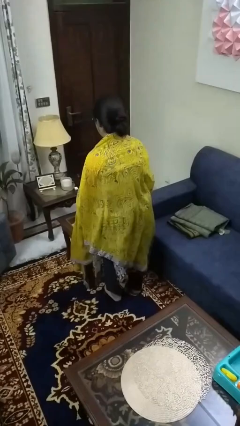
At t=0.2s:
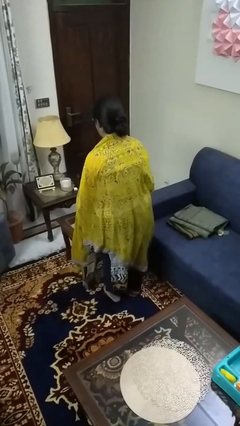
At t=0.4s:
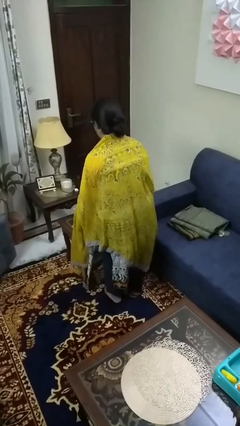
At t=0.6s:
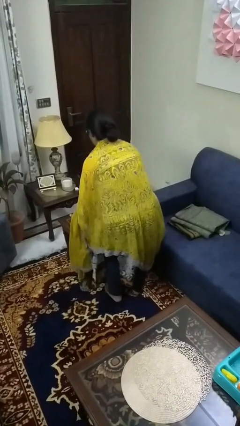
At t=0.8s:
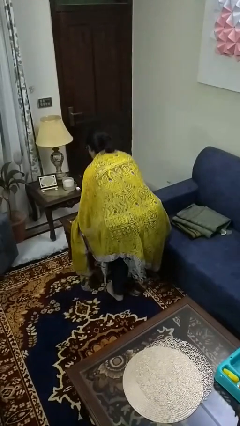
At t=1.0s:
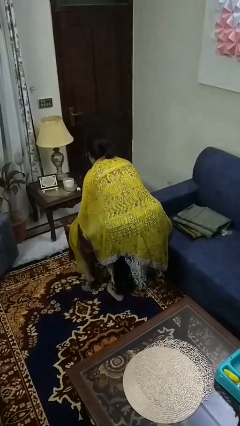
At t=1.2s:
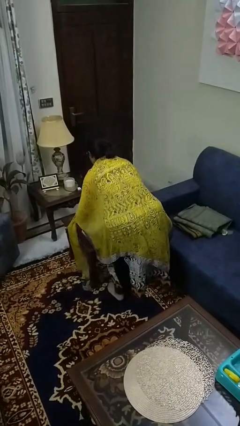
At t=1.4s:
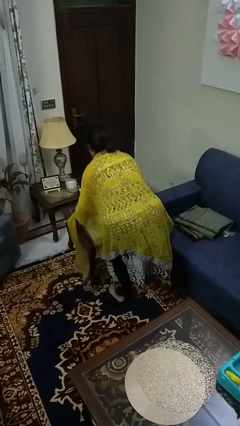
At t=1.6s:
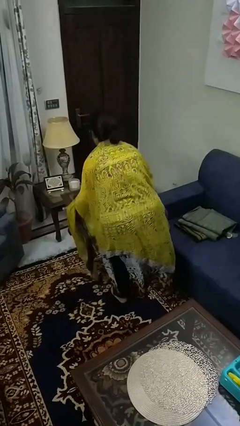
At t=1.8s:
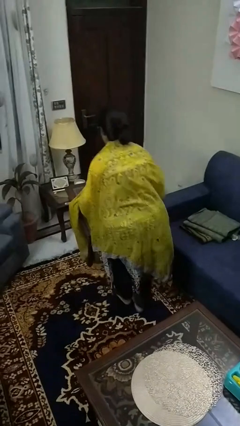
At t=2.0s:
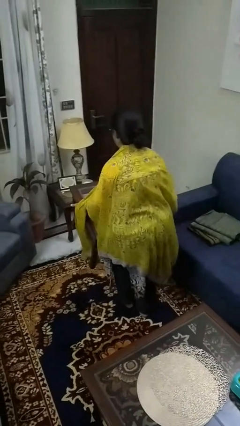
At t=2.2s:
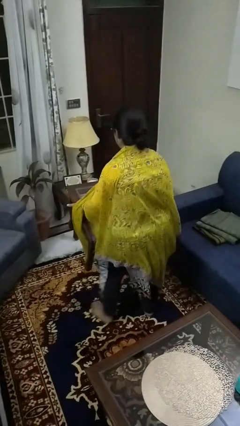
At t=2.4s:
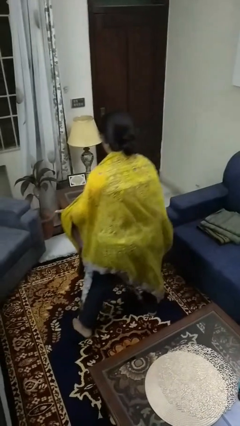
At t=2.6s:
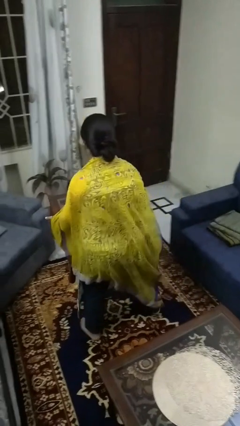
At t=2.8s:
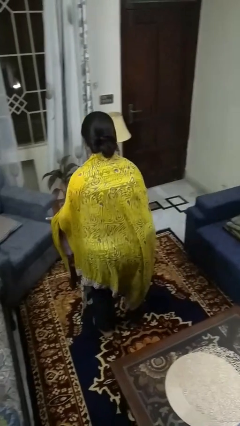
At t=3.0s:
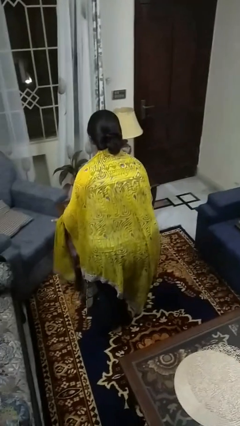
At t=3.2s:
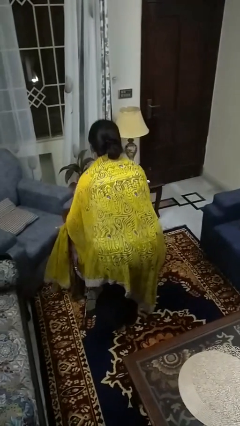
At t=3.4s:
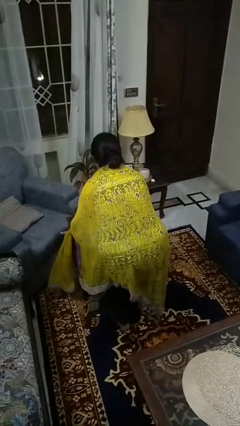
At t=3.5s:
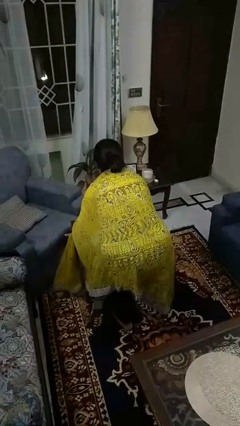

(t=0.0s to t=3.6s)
person carries furniture

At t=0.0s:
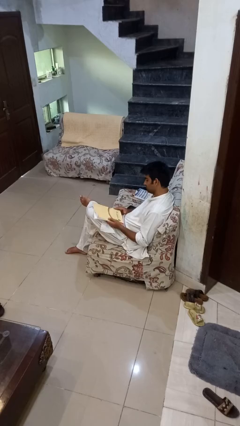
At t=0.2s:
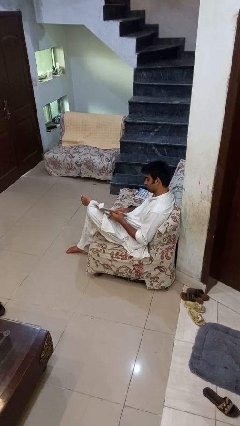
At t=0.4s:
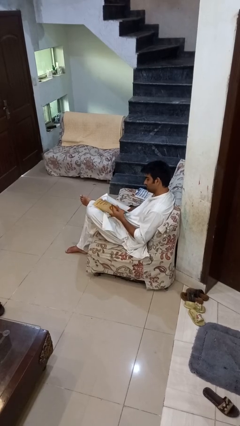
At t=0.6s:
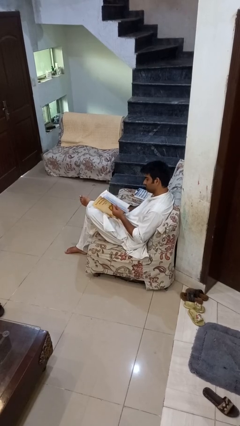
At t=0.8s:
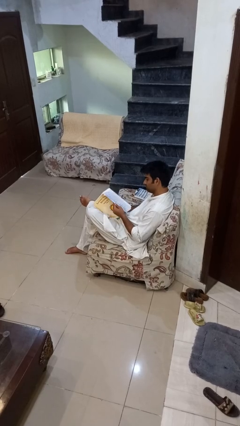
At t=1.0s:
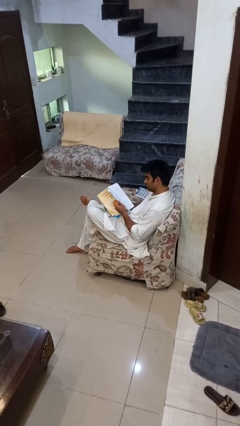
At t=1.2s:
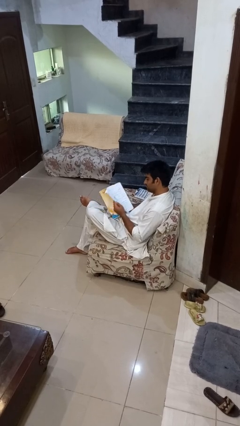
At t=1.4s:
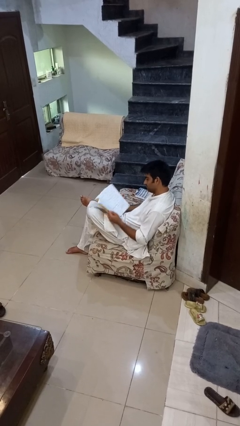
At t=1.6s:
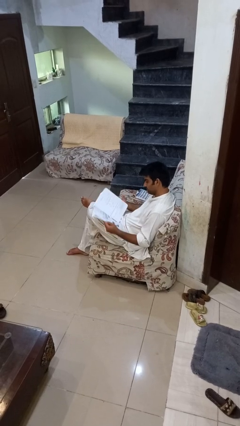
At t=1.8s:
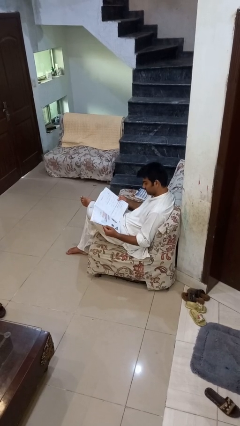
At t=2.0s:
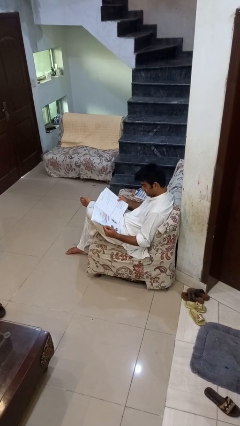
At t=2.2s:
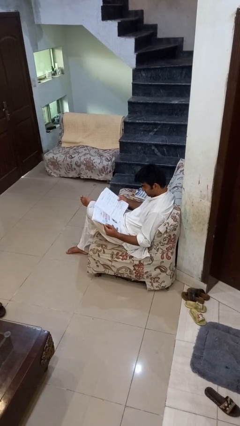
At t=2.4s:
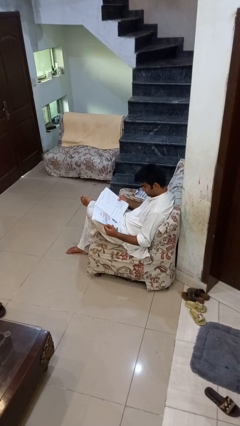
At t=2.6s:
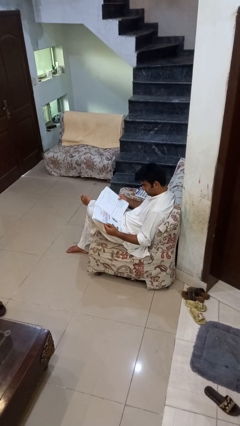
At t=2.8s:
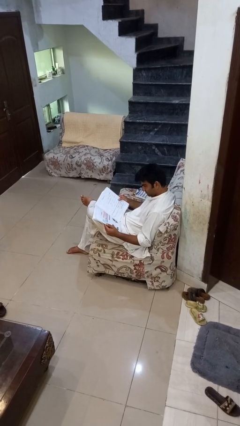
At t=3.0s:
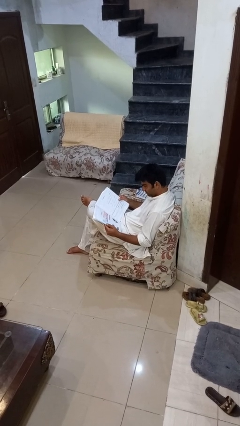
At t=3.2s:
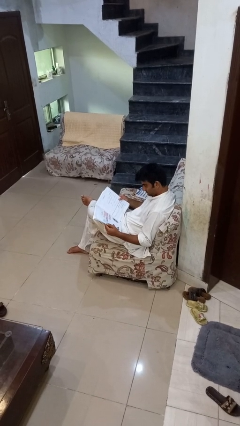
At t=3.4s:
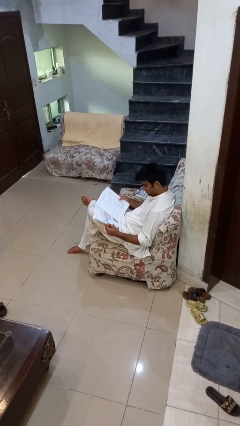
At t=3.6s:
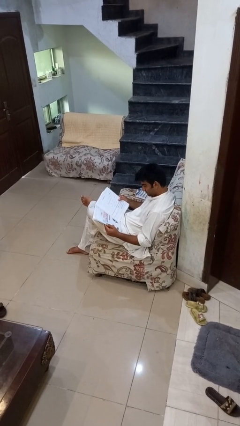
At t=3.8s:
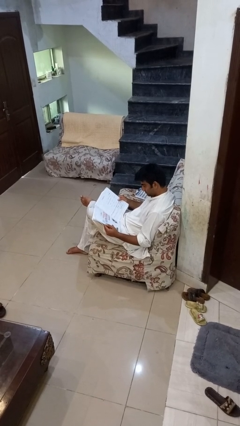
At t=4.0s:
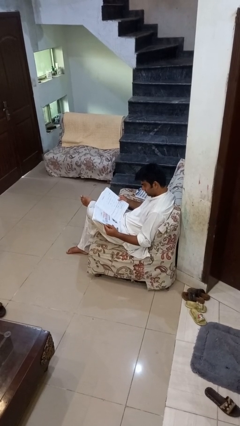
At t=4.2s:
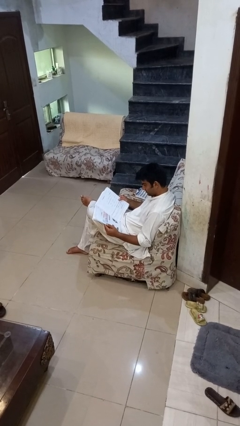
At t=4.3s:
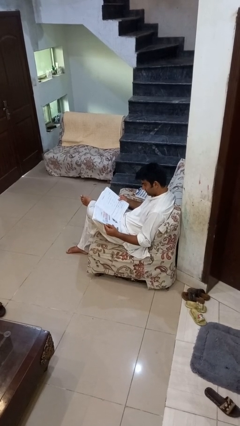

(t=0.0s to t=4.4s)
person reads book

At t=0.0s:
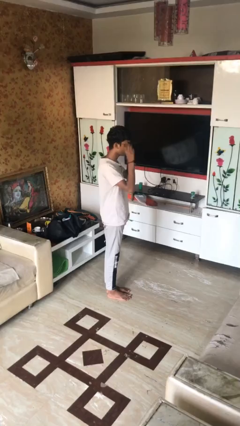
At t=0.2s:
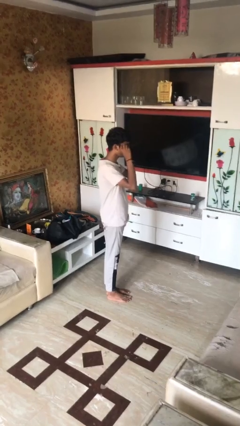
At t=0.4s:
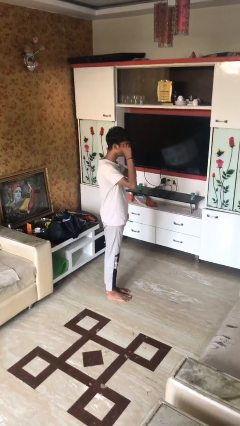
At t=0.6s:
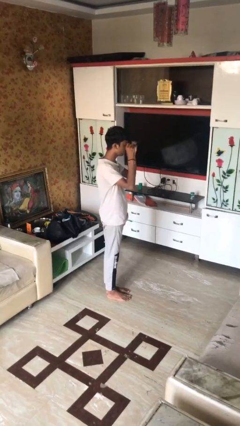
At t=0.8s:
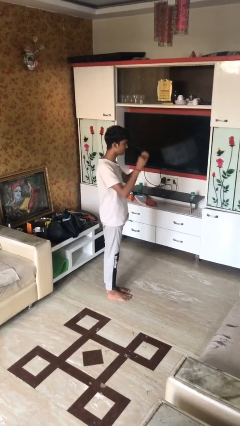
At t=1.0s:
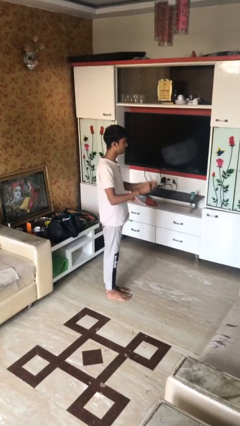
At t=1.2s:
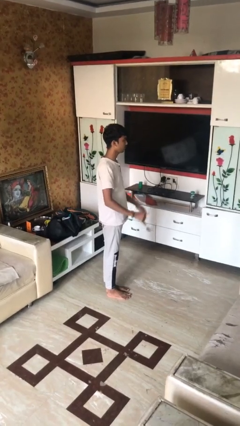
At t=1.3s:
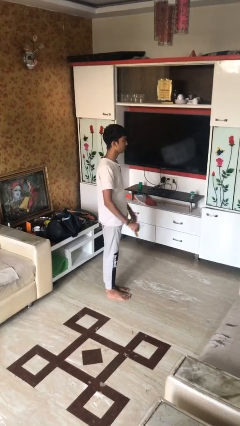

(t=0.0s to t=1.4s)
person takes off sunglasses

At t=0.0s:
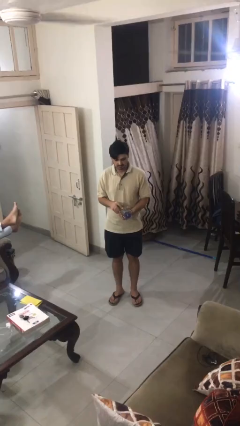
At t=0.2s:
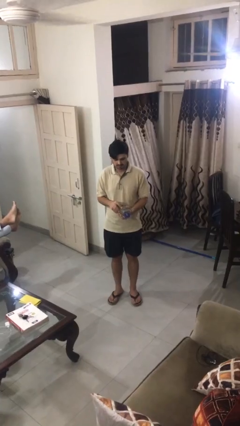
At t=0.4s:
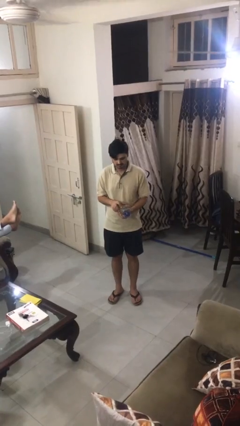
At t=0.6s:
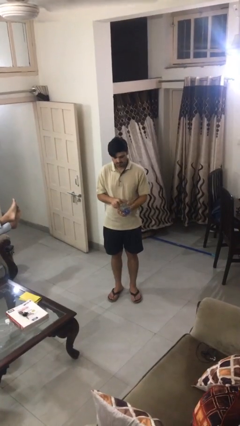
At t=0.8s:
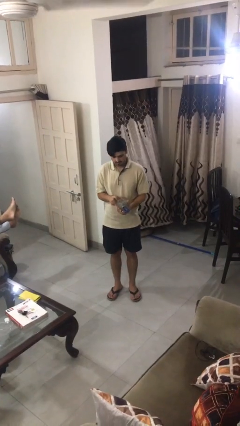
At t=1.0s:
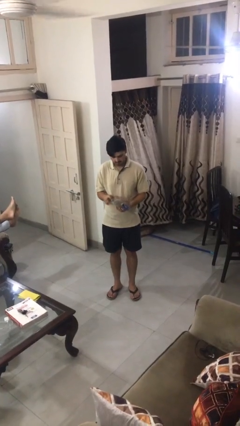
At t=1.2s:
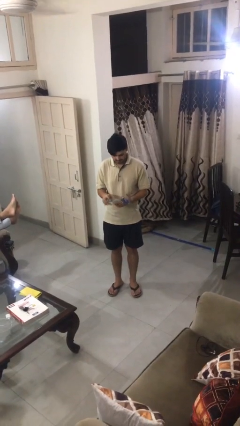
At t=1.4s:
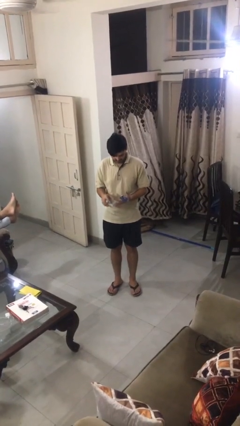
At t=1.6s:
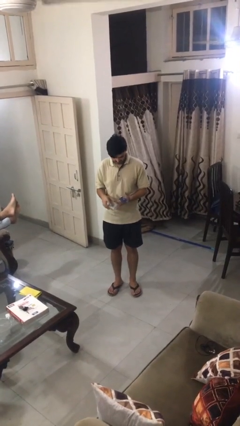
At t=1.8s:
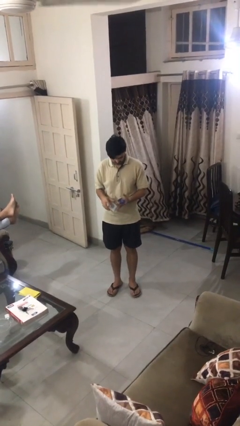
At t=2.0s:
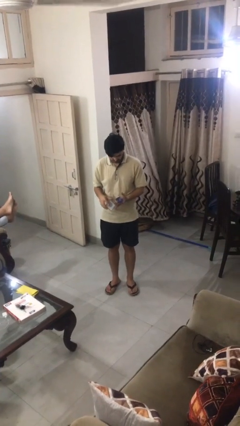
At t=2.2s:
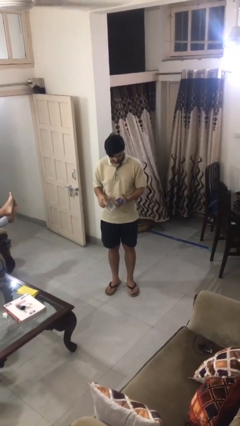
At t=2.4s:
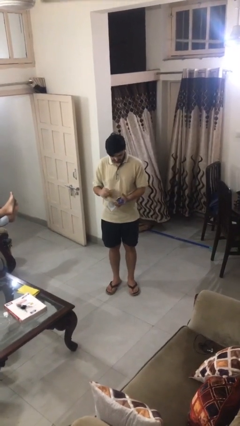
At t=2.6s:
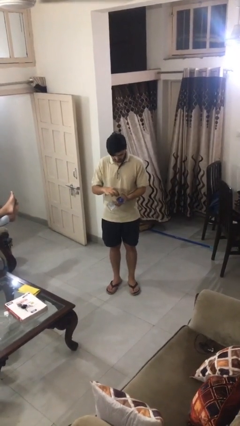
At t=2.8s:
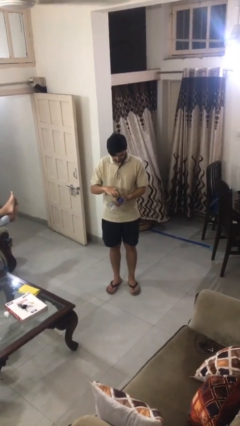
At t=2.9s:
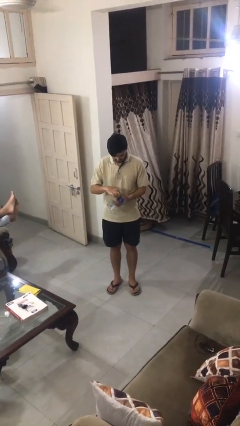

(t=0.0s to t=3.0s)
person opens jewelry box

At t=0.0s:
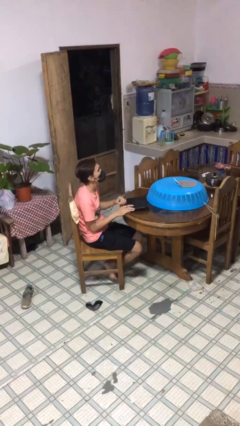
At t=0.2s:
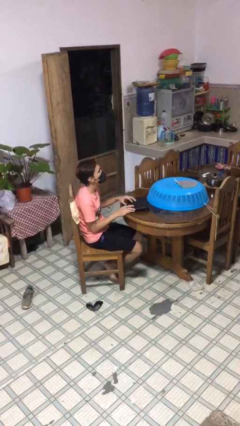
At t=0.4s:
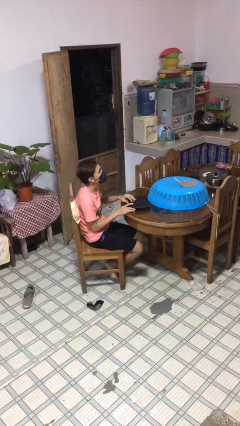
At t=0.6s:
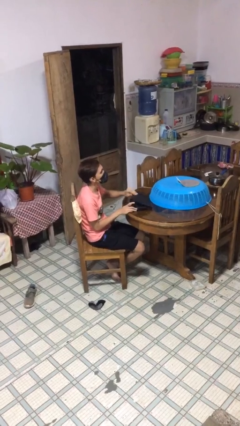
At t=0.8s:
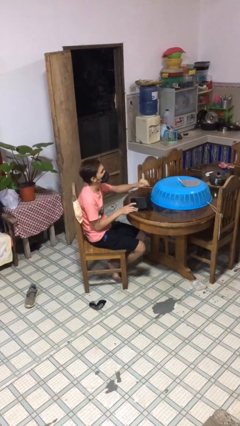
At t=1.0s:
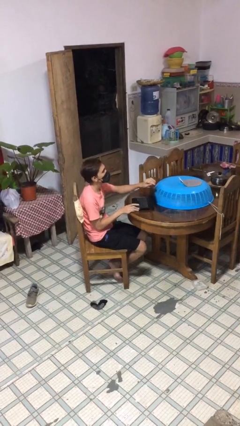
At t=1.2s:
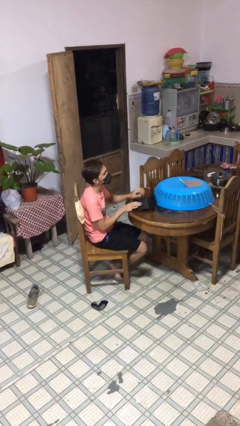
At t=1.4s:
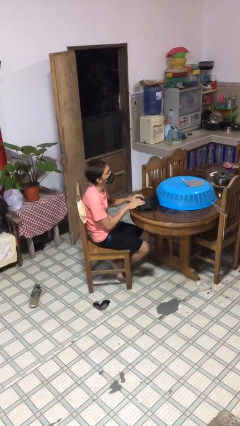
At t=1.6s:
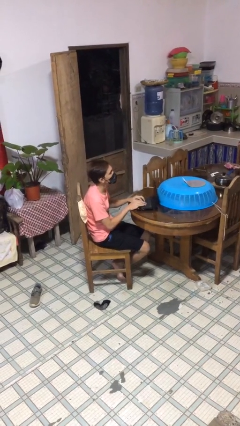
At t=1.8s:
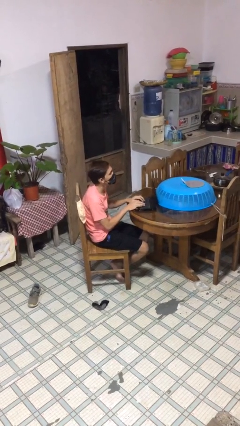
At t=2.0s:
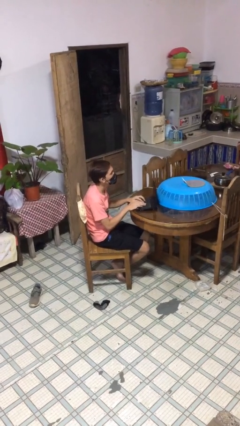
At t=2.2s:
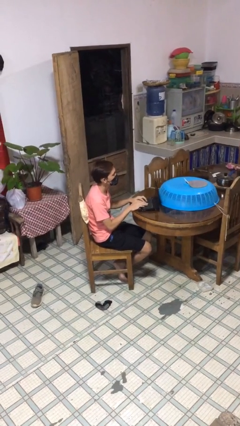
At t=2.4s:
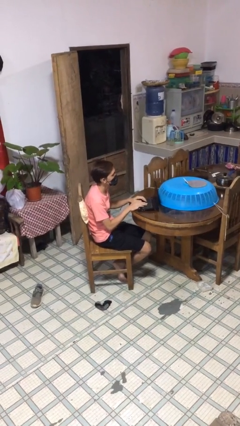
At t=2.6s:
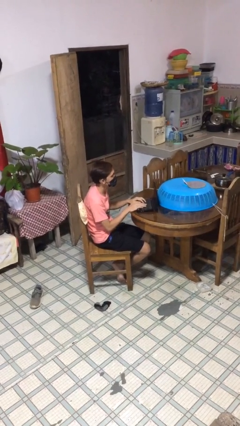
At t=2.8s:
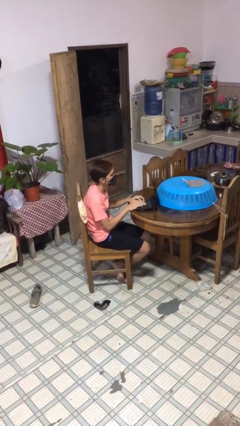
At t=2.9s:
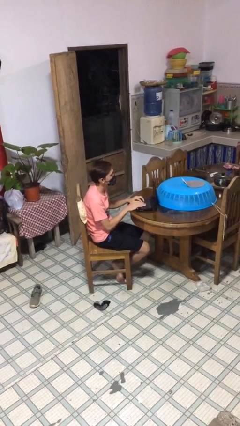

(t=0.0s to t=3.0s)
person interacts with laptop

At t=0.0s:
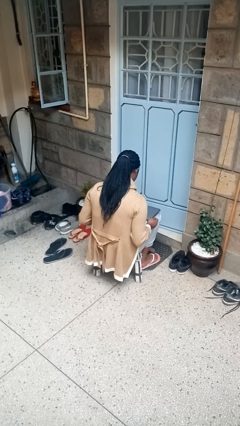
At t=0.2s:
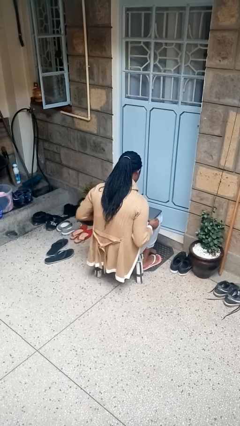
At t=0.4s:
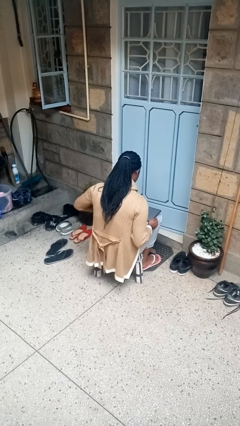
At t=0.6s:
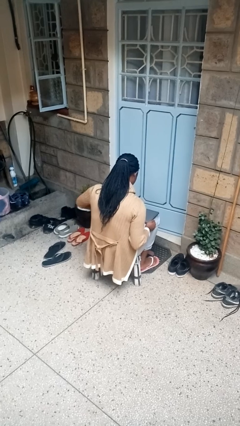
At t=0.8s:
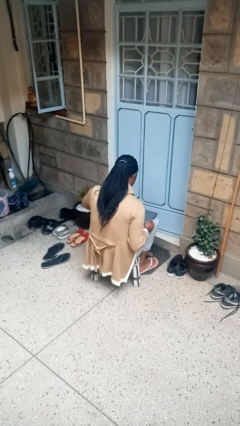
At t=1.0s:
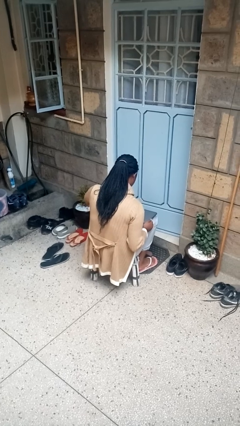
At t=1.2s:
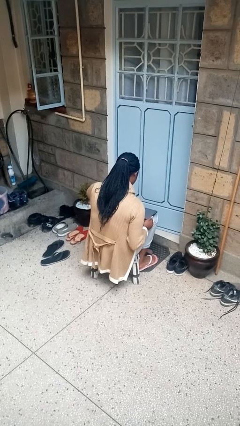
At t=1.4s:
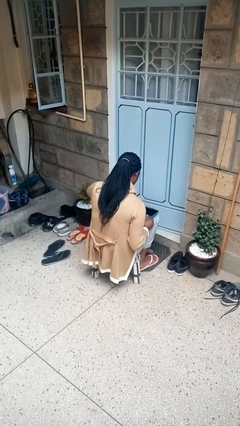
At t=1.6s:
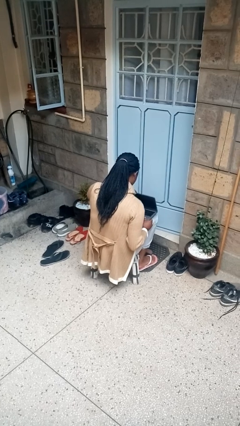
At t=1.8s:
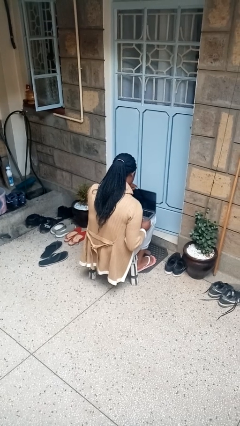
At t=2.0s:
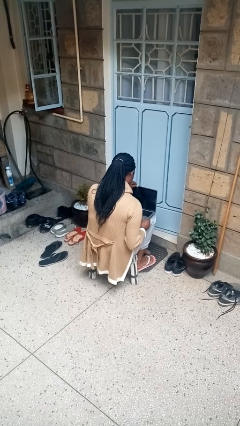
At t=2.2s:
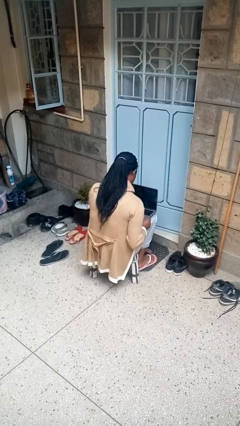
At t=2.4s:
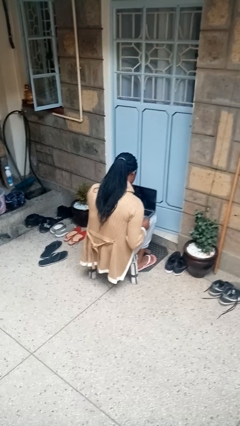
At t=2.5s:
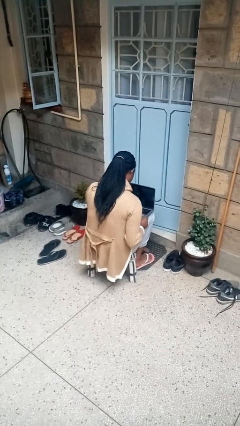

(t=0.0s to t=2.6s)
person opens laptop
